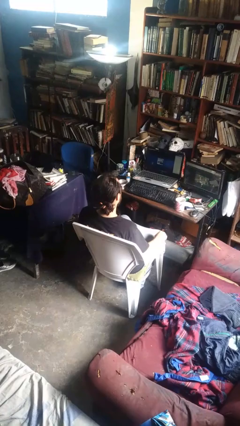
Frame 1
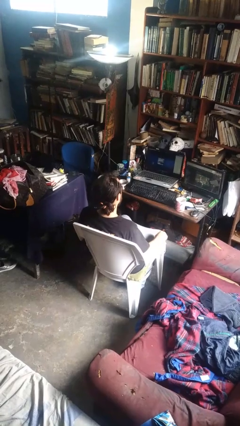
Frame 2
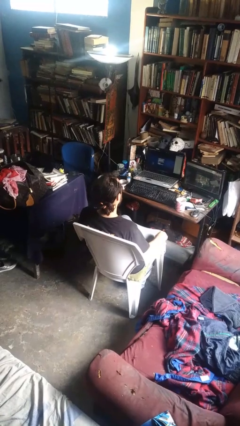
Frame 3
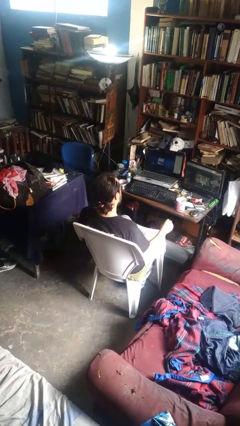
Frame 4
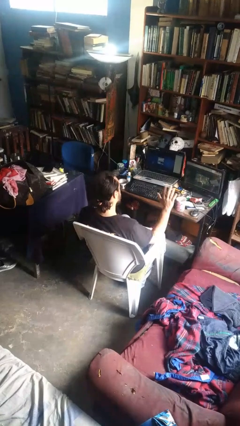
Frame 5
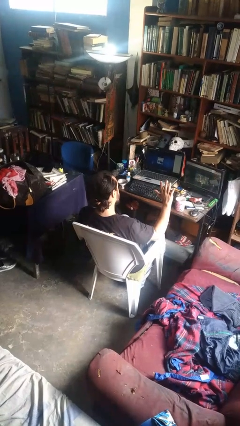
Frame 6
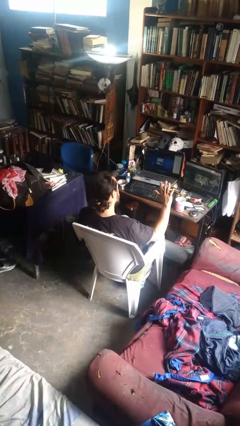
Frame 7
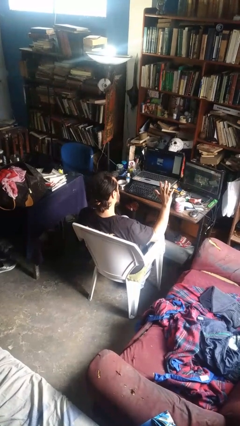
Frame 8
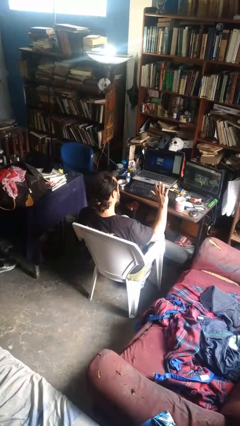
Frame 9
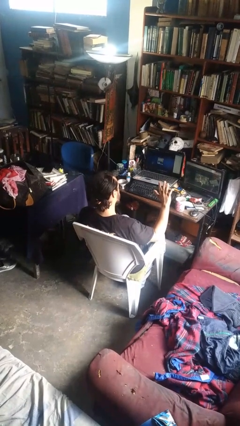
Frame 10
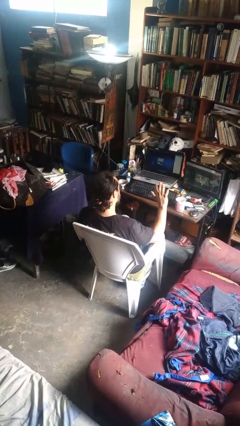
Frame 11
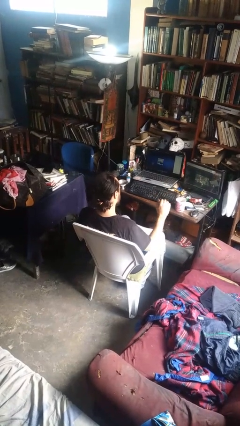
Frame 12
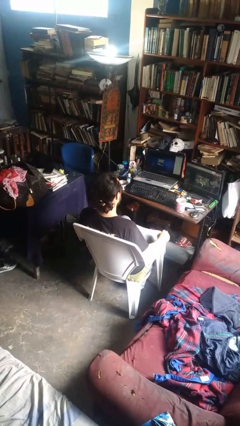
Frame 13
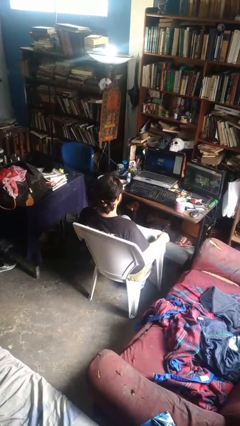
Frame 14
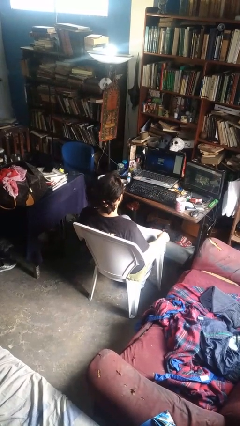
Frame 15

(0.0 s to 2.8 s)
person gestures number five

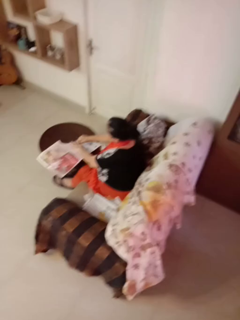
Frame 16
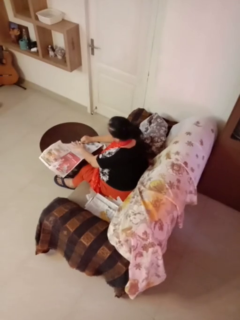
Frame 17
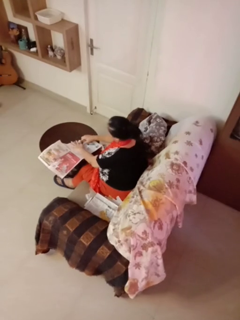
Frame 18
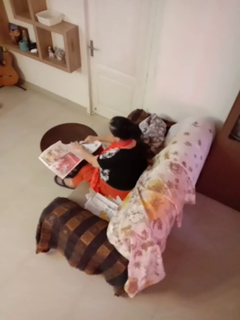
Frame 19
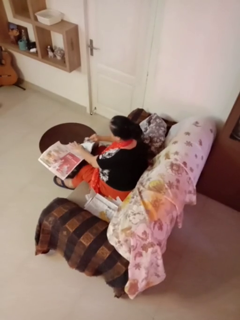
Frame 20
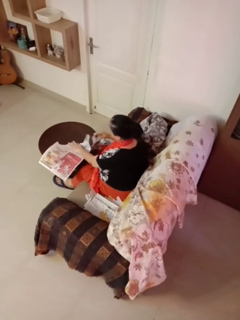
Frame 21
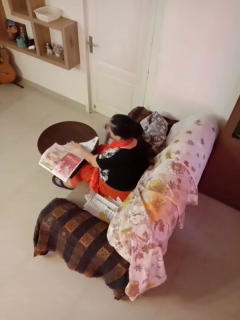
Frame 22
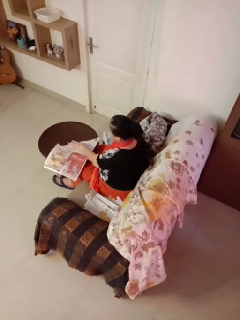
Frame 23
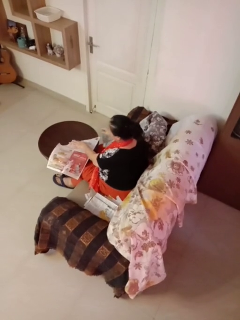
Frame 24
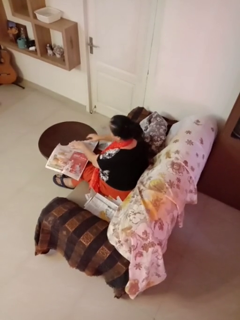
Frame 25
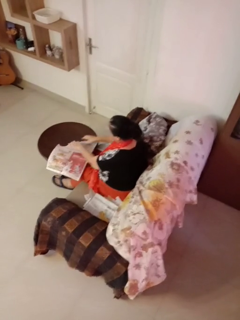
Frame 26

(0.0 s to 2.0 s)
person tears paper

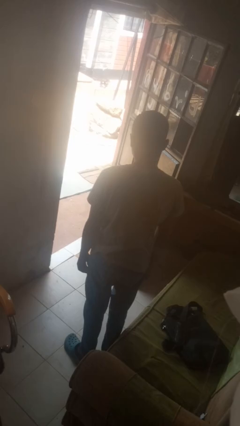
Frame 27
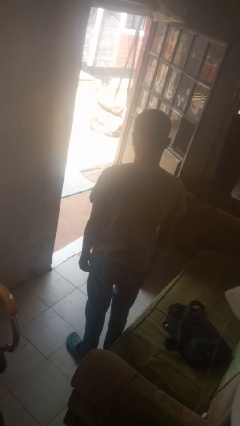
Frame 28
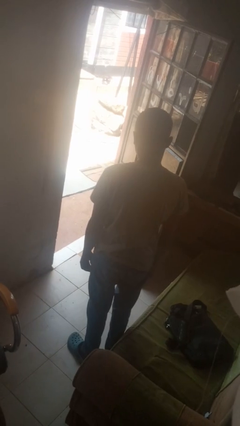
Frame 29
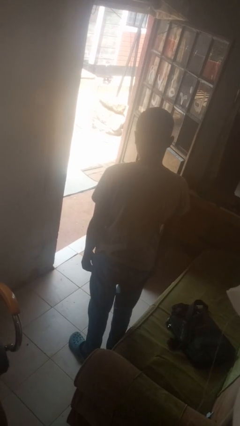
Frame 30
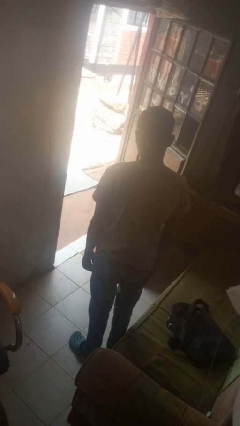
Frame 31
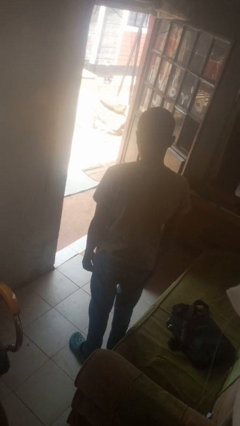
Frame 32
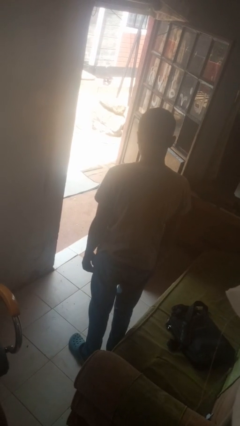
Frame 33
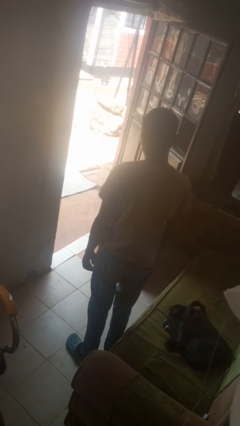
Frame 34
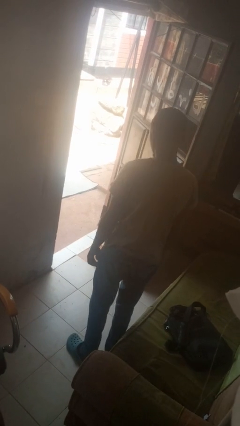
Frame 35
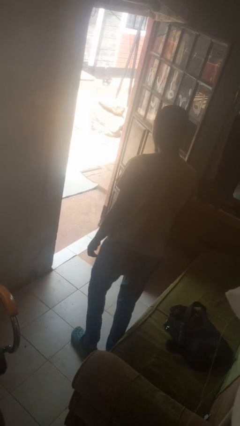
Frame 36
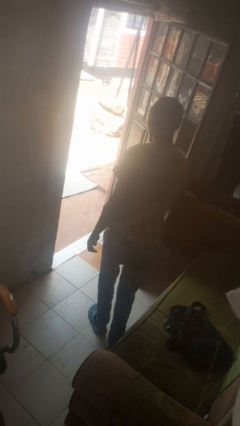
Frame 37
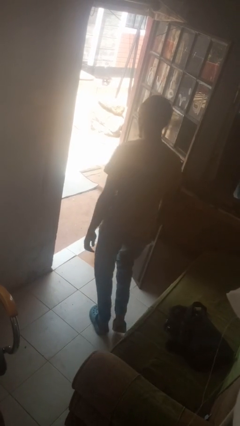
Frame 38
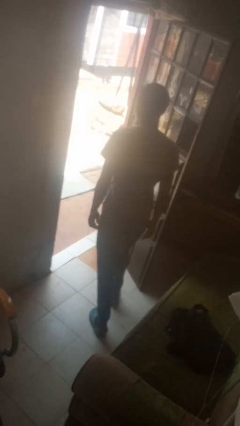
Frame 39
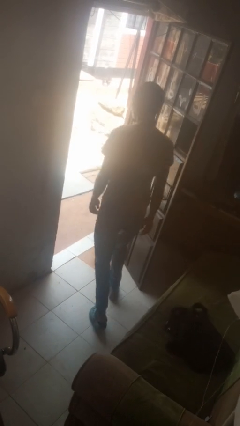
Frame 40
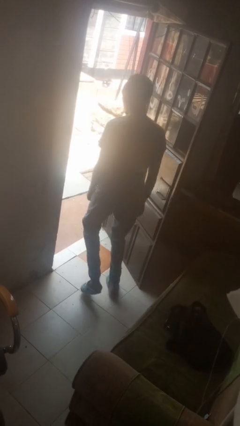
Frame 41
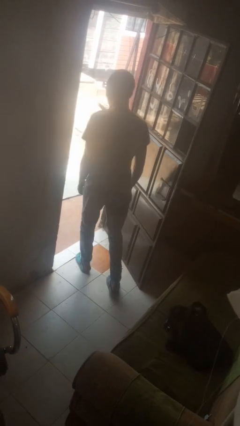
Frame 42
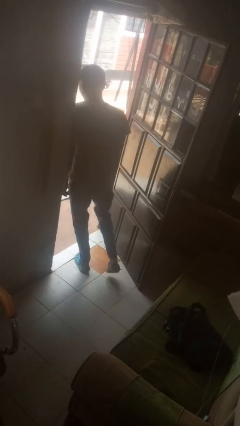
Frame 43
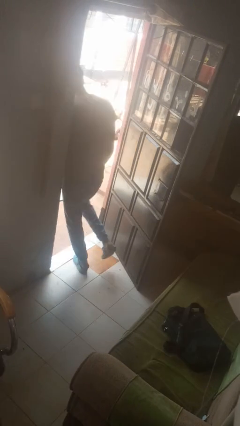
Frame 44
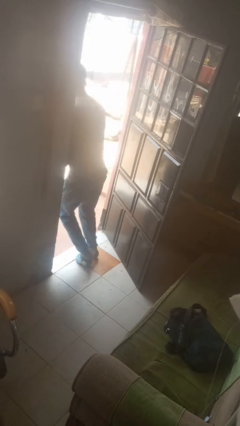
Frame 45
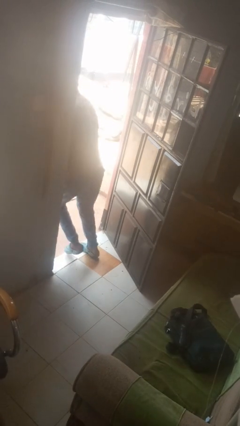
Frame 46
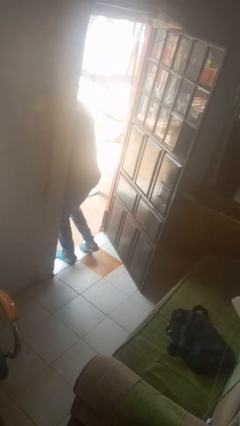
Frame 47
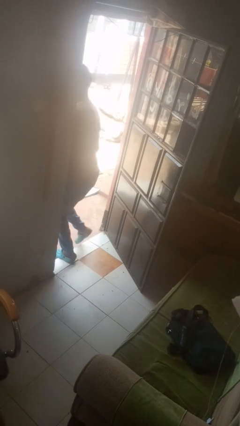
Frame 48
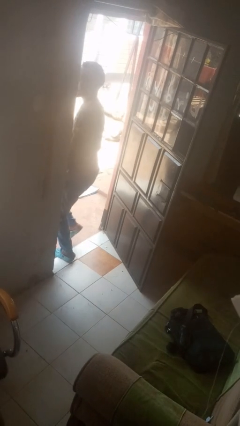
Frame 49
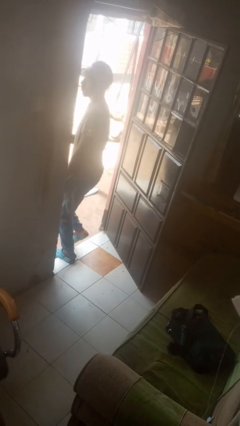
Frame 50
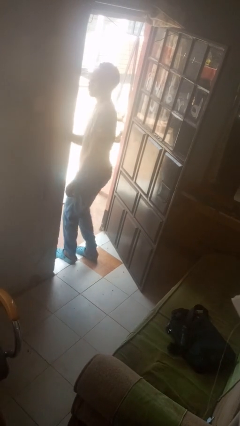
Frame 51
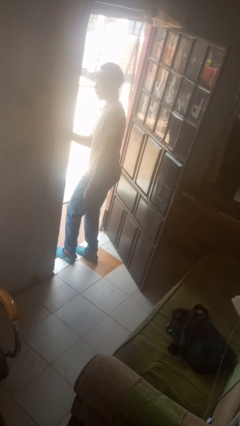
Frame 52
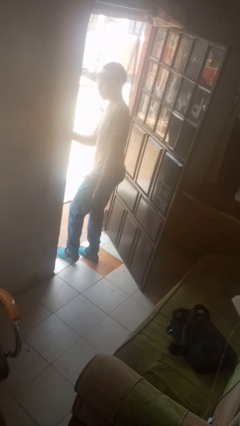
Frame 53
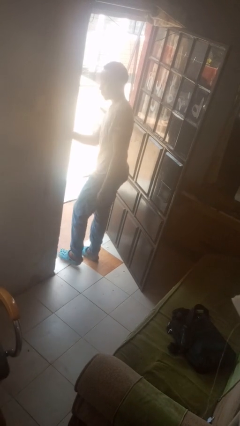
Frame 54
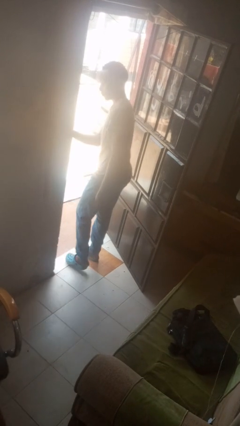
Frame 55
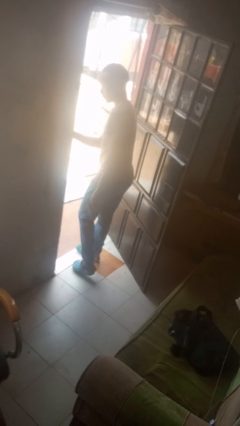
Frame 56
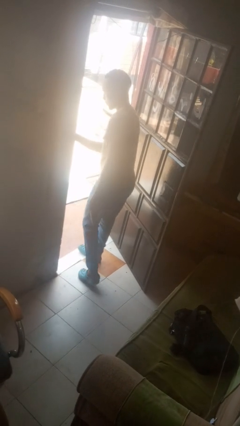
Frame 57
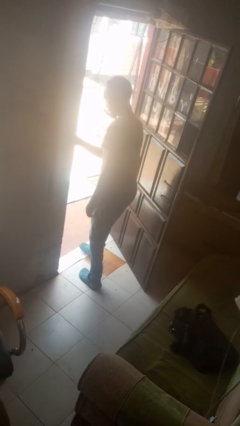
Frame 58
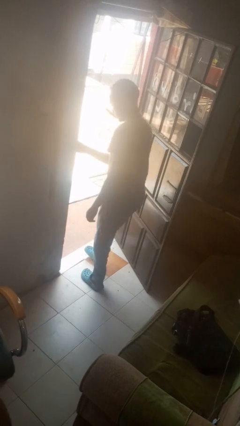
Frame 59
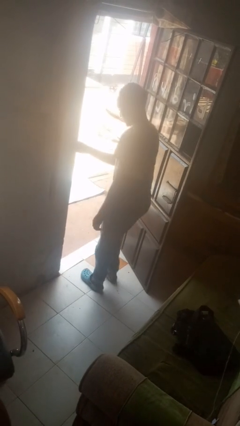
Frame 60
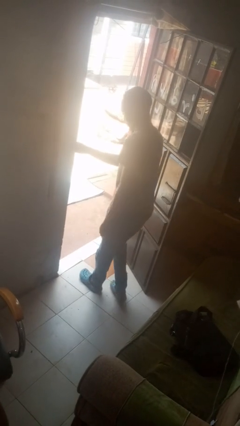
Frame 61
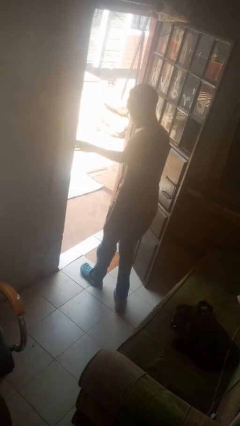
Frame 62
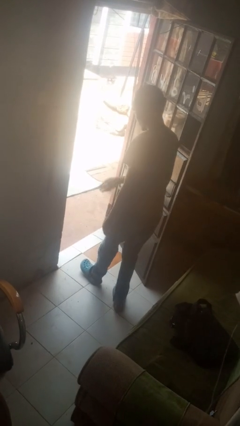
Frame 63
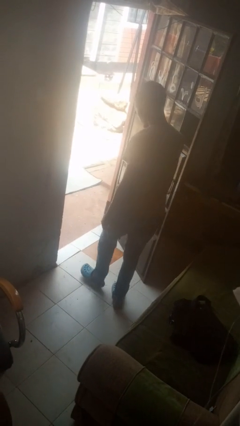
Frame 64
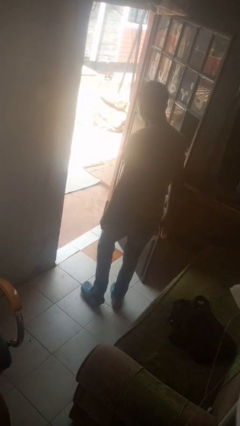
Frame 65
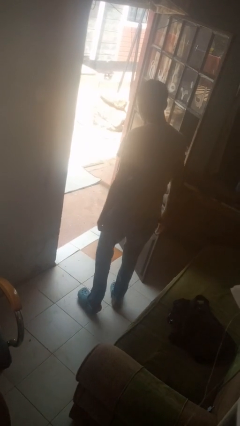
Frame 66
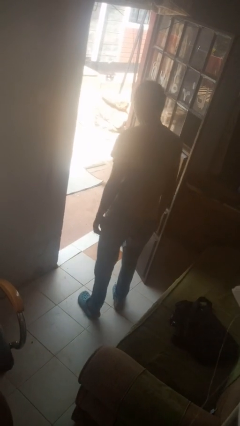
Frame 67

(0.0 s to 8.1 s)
person bumps into wall

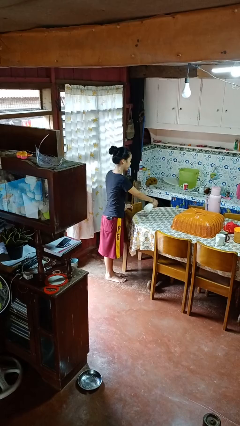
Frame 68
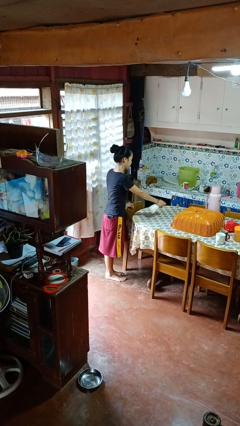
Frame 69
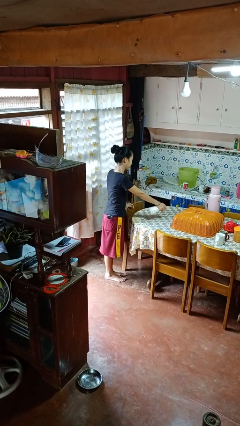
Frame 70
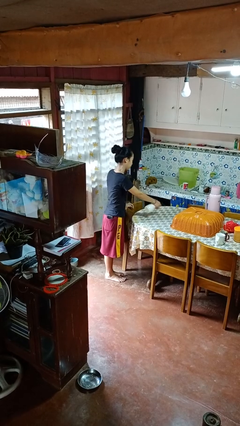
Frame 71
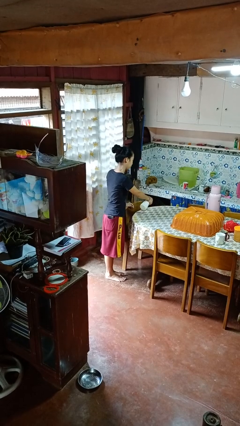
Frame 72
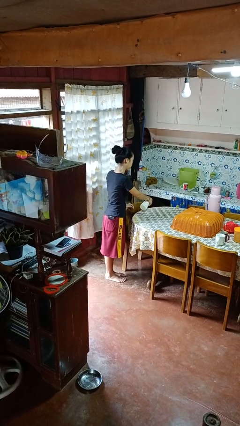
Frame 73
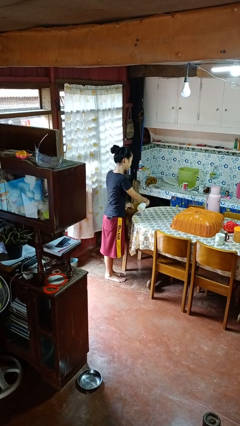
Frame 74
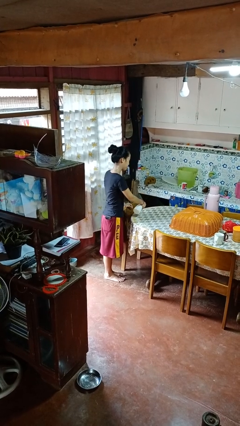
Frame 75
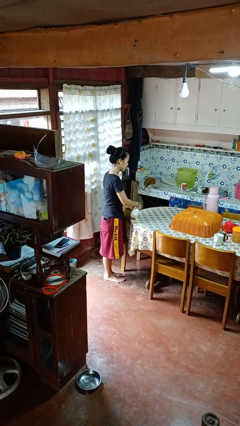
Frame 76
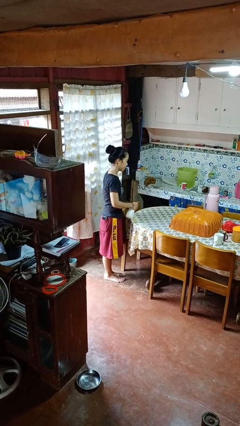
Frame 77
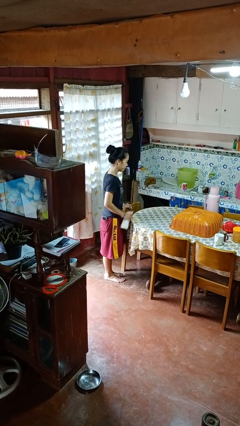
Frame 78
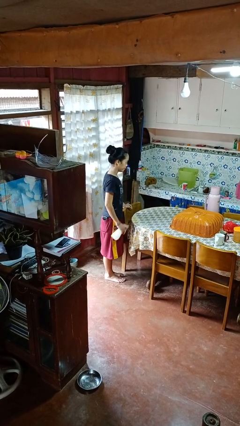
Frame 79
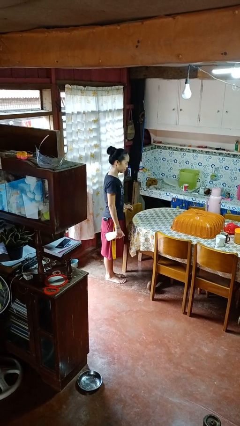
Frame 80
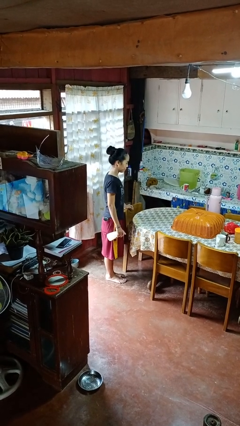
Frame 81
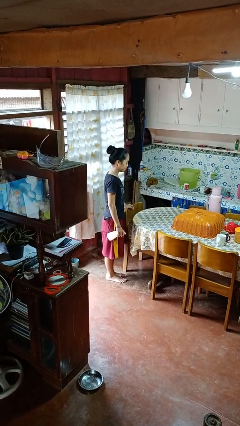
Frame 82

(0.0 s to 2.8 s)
person sprays from bottle

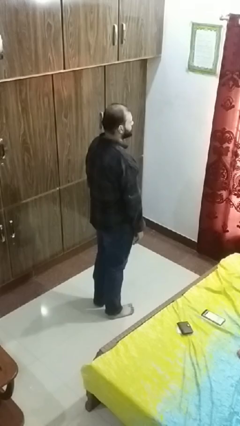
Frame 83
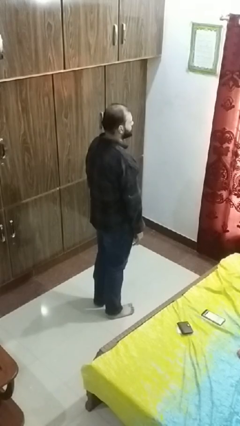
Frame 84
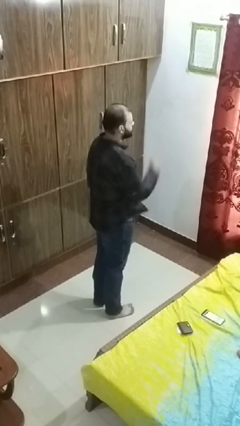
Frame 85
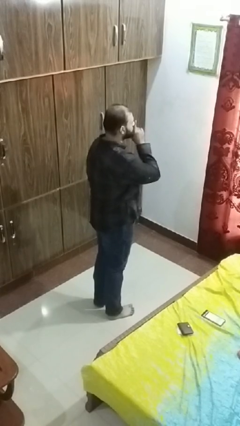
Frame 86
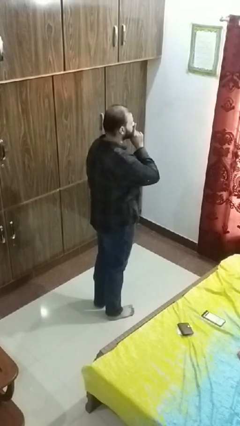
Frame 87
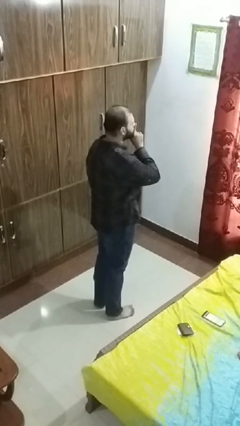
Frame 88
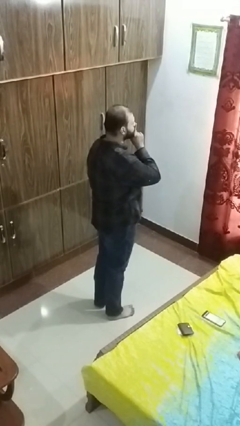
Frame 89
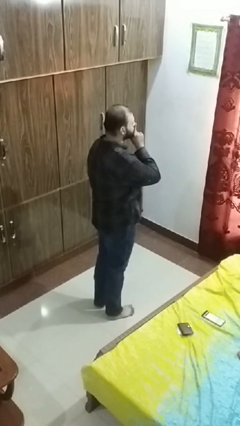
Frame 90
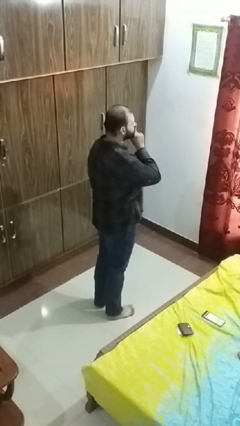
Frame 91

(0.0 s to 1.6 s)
person gestures be quiet

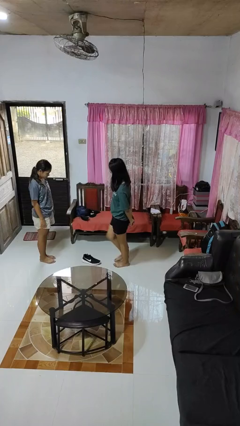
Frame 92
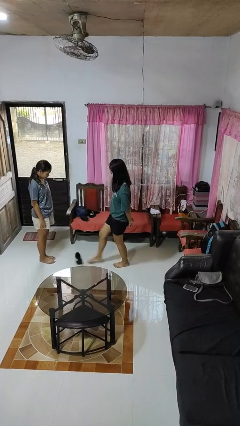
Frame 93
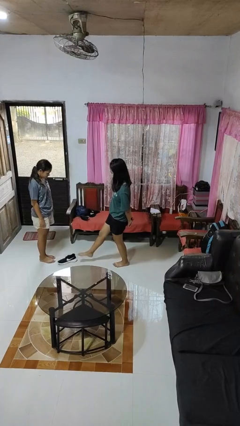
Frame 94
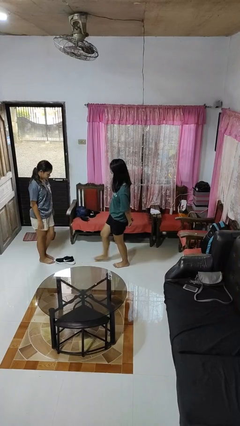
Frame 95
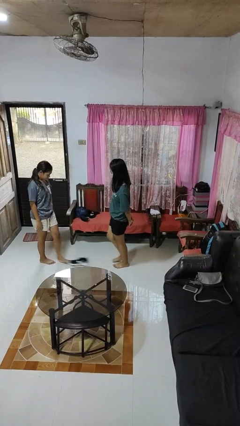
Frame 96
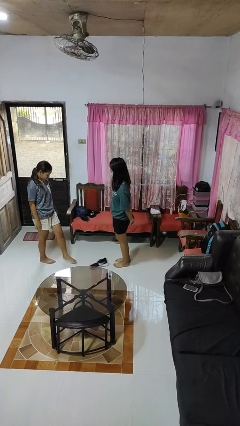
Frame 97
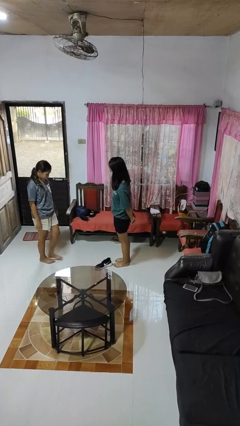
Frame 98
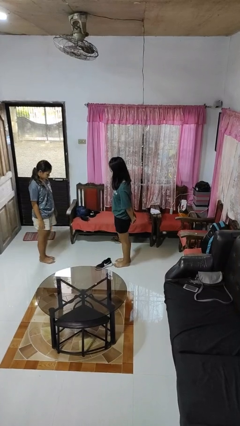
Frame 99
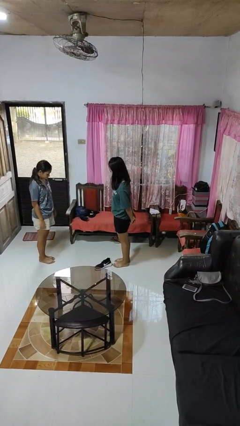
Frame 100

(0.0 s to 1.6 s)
person kicks object to person
